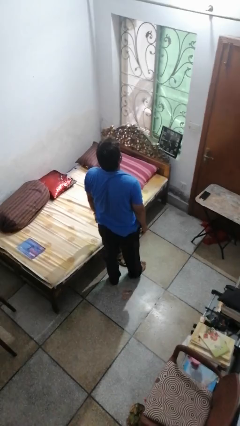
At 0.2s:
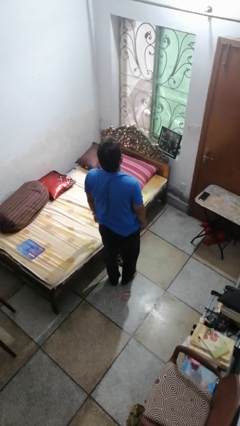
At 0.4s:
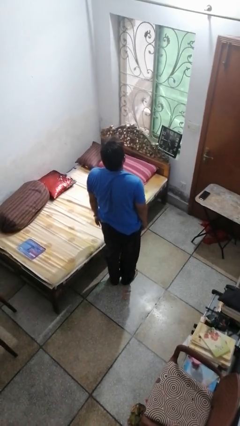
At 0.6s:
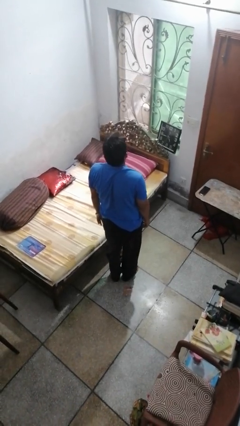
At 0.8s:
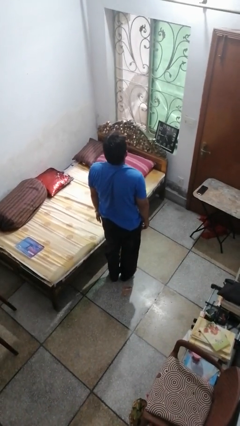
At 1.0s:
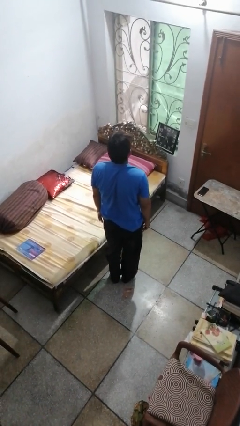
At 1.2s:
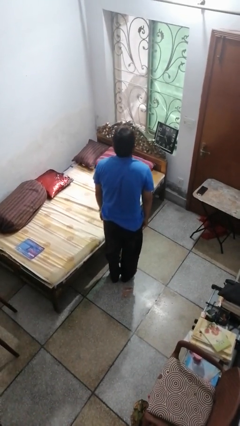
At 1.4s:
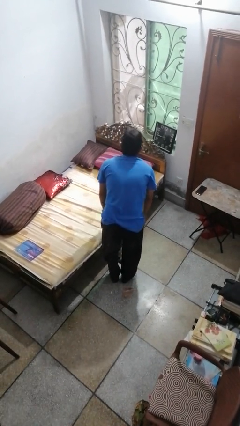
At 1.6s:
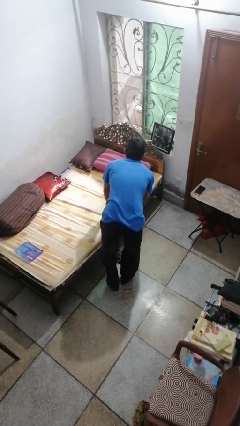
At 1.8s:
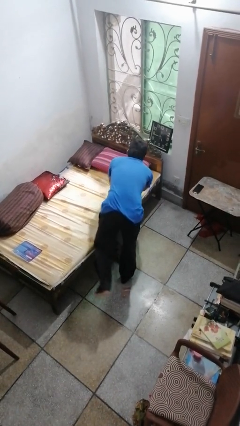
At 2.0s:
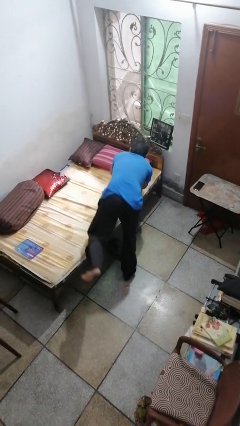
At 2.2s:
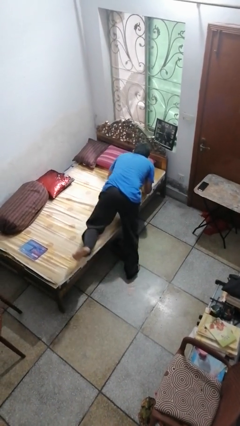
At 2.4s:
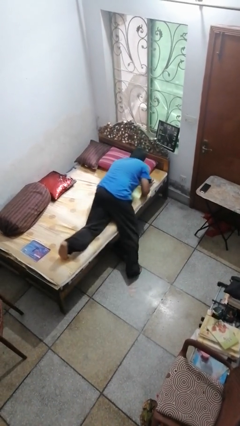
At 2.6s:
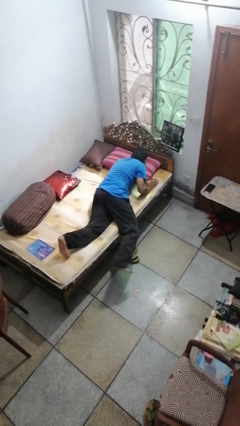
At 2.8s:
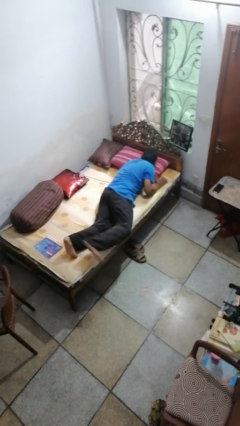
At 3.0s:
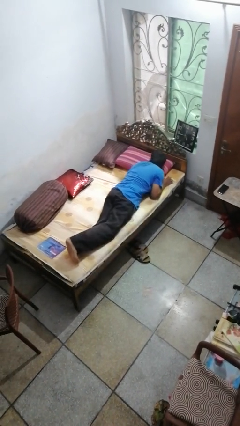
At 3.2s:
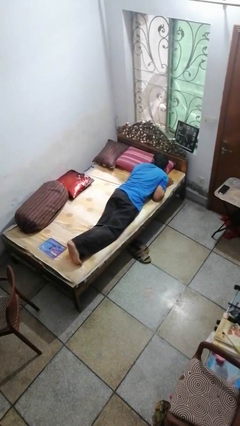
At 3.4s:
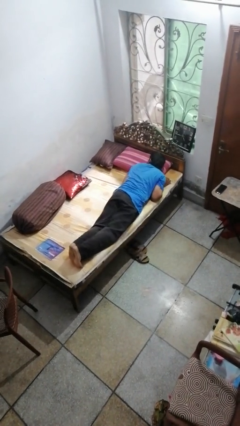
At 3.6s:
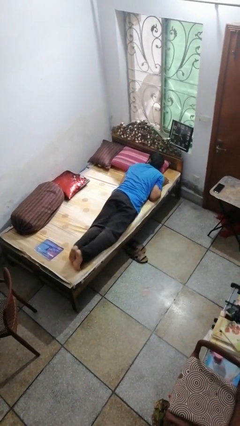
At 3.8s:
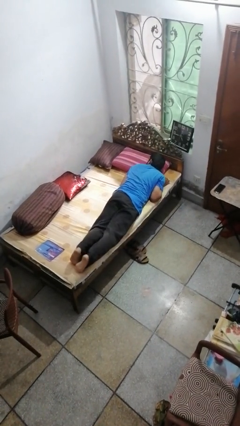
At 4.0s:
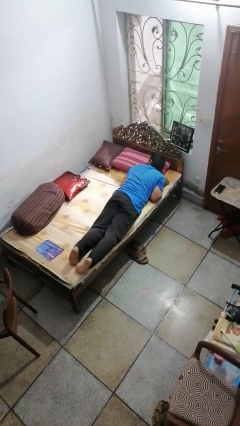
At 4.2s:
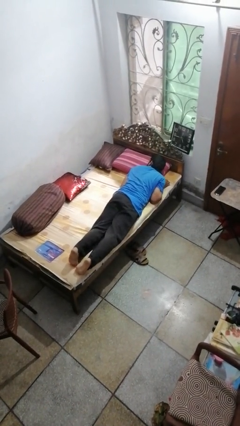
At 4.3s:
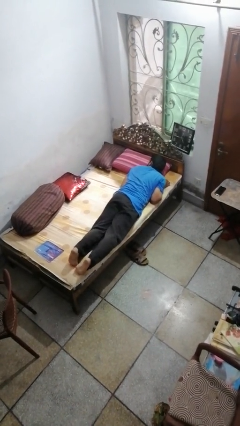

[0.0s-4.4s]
person lies down on bed

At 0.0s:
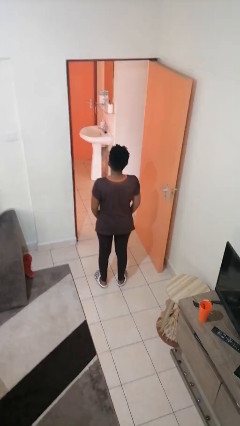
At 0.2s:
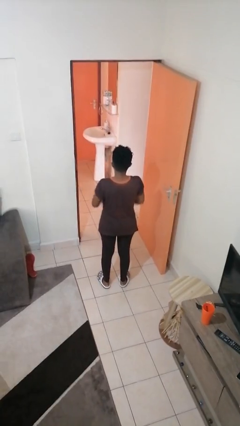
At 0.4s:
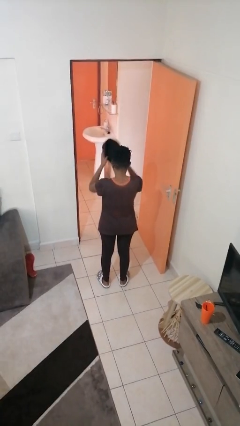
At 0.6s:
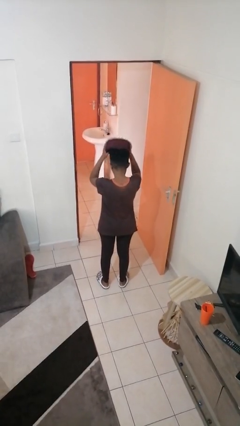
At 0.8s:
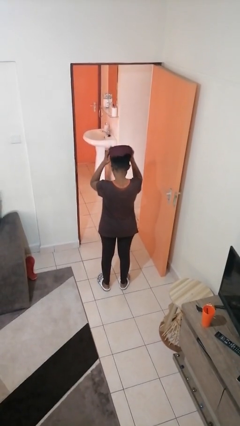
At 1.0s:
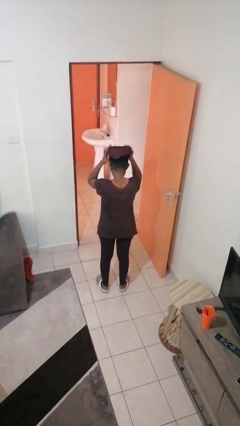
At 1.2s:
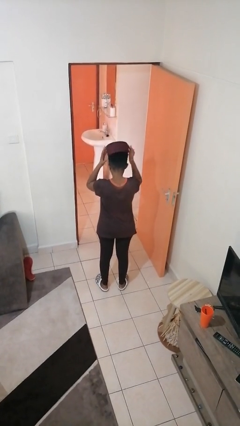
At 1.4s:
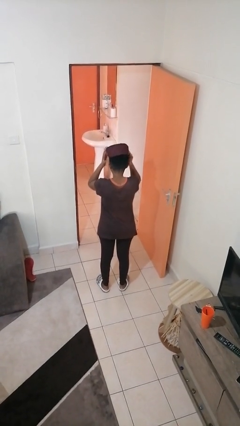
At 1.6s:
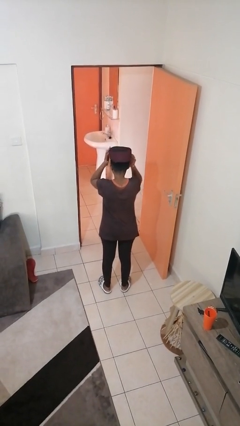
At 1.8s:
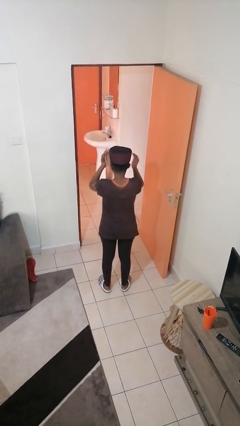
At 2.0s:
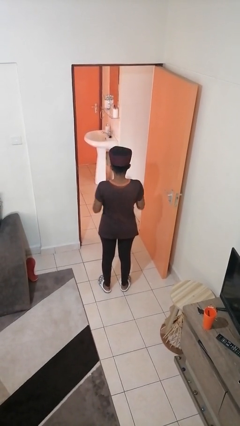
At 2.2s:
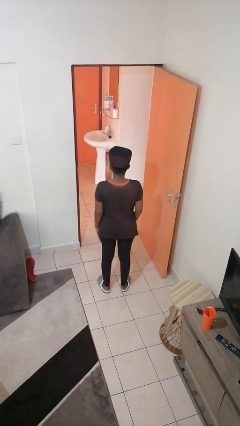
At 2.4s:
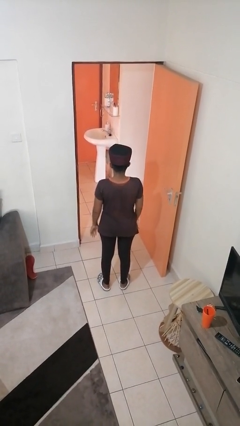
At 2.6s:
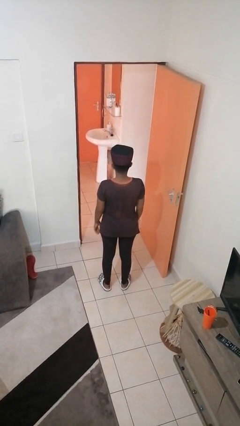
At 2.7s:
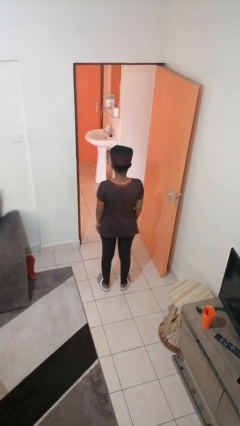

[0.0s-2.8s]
person puts on hat

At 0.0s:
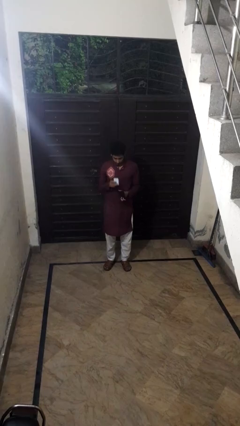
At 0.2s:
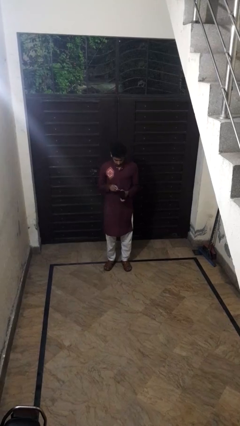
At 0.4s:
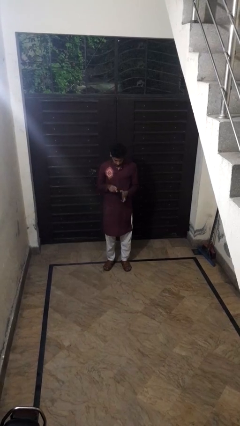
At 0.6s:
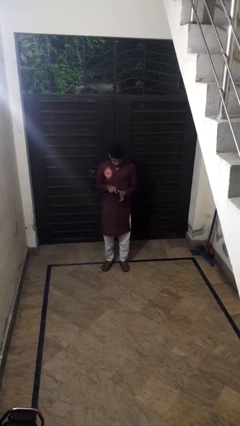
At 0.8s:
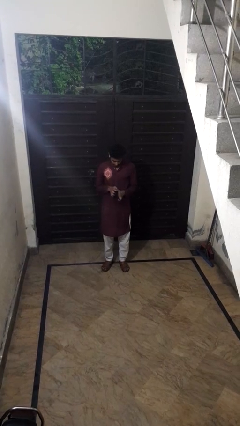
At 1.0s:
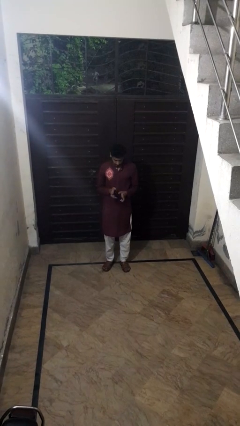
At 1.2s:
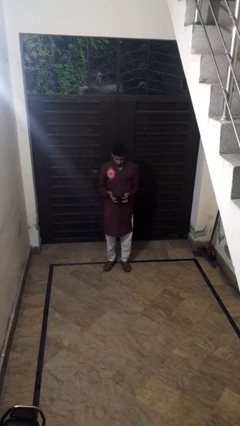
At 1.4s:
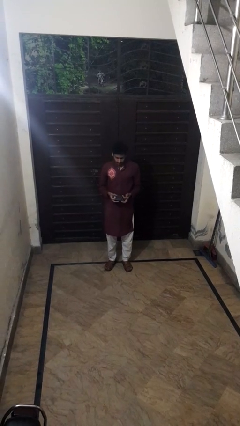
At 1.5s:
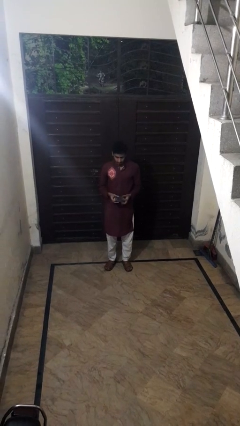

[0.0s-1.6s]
person puts object into purse

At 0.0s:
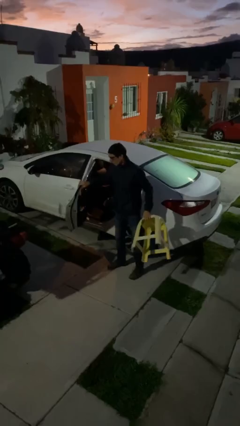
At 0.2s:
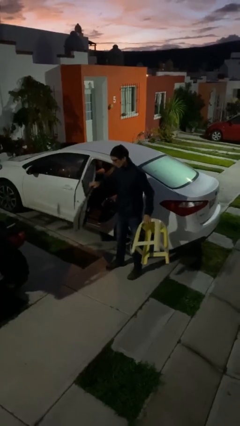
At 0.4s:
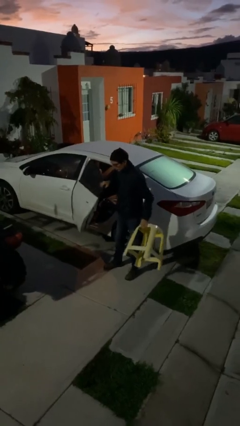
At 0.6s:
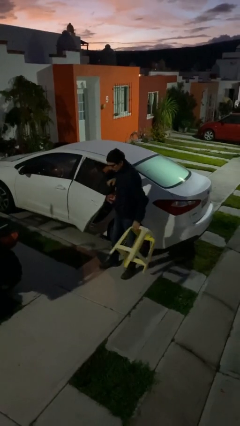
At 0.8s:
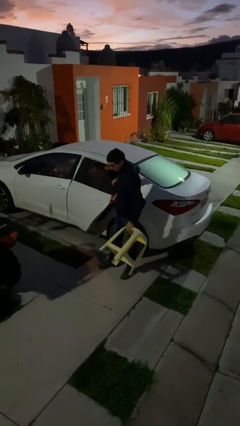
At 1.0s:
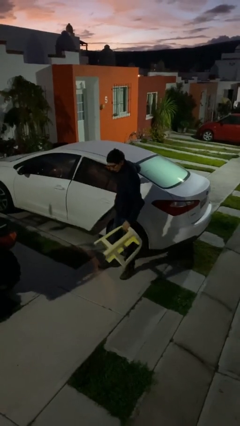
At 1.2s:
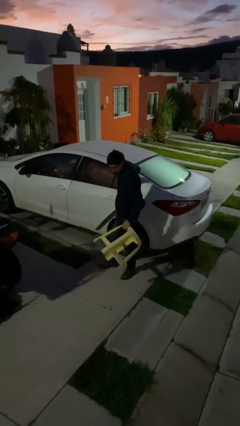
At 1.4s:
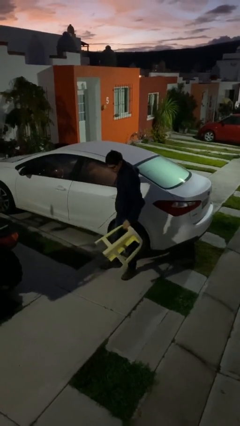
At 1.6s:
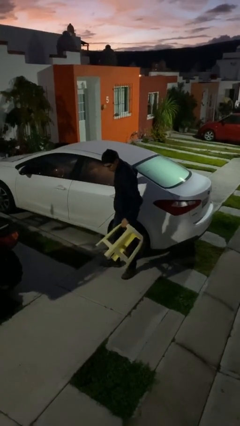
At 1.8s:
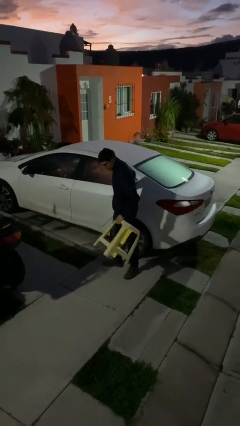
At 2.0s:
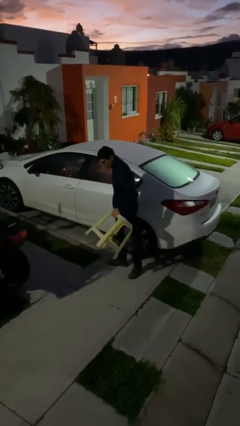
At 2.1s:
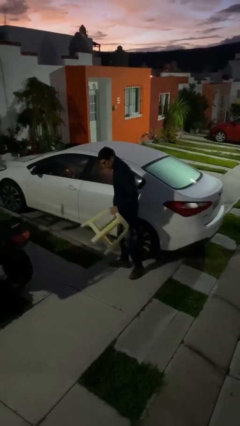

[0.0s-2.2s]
person closes car door

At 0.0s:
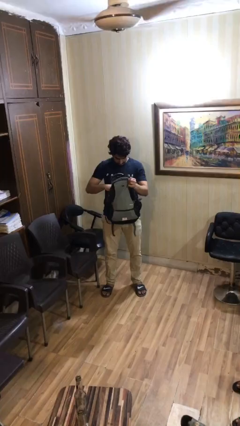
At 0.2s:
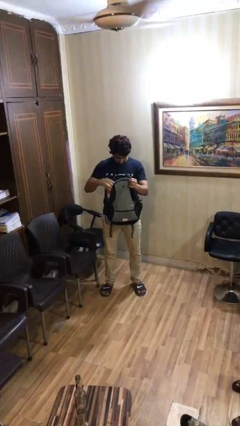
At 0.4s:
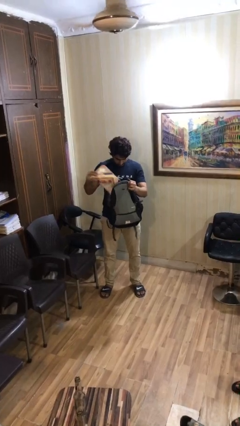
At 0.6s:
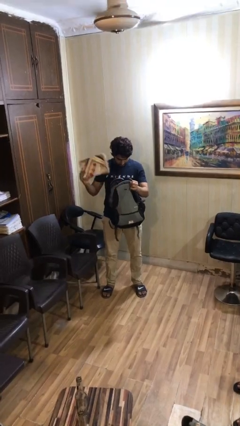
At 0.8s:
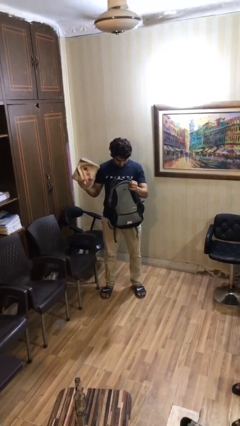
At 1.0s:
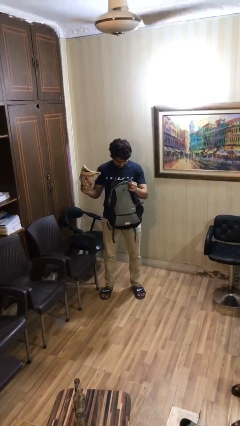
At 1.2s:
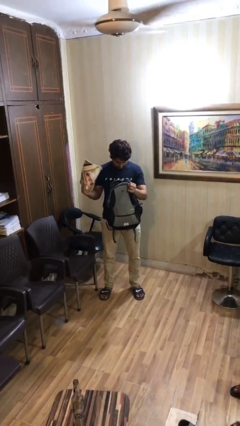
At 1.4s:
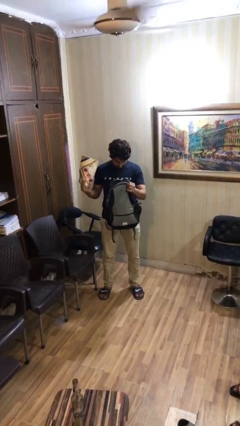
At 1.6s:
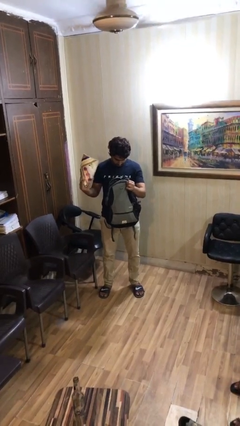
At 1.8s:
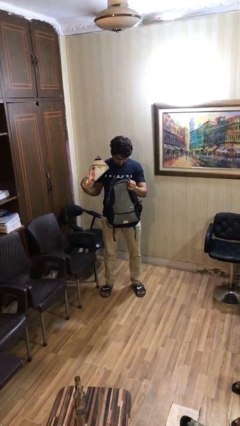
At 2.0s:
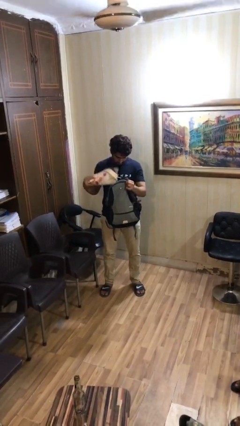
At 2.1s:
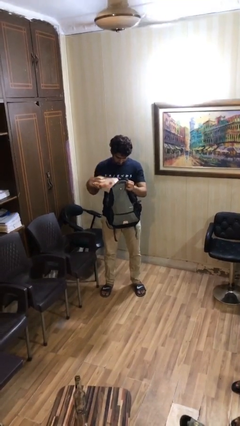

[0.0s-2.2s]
person takes object from backpack
